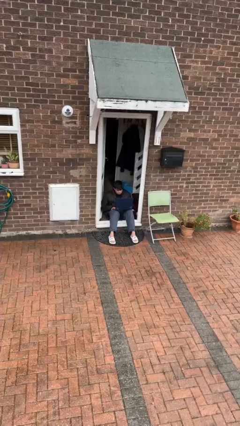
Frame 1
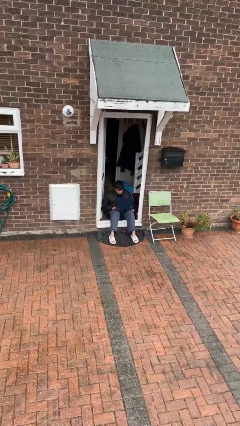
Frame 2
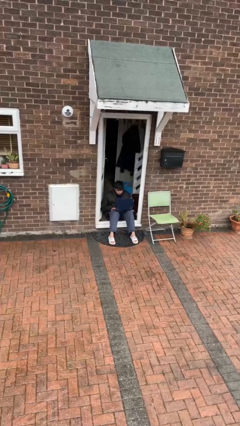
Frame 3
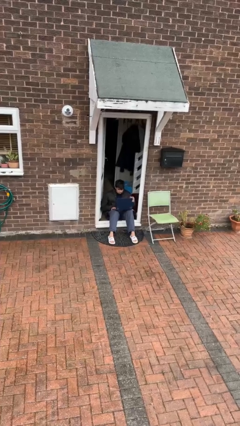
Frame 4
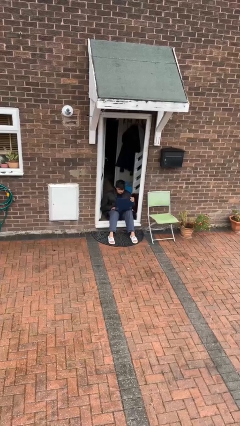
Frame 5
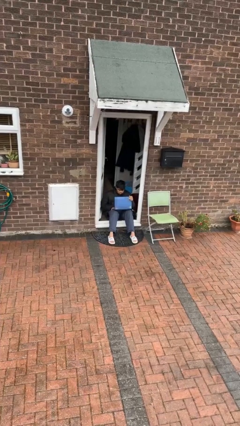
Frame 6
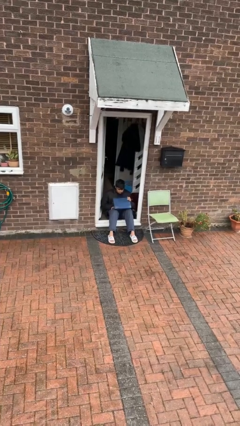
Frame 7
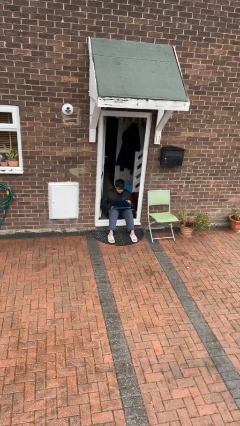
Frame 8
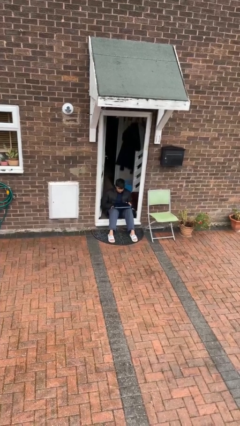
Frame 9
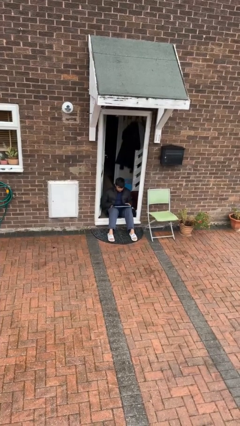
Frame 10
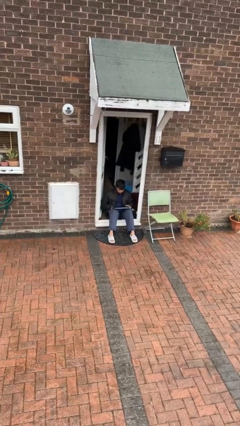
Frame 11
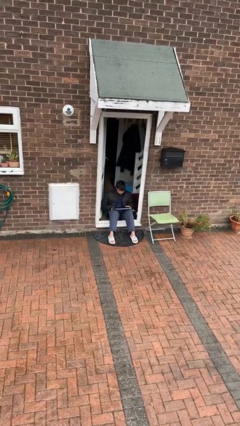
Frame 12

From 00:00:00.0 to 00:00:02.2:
person closes laptop

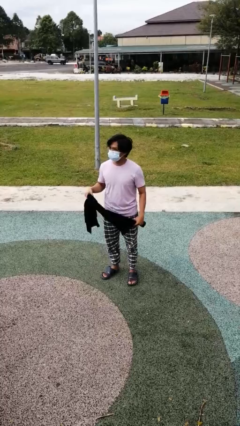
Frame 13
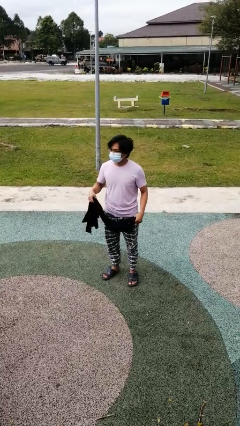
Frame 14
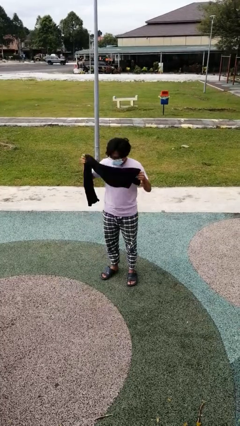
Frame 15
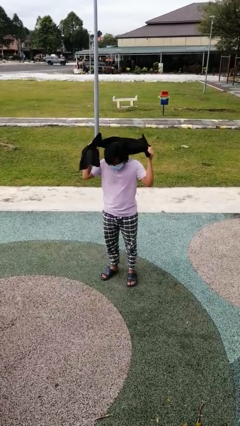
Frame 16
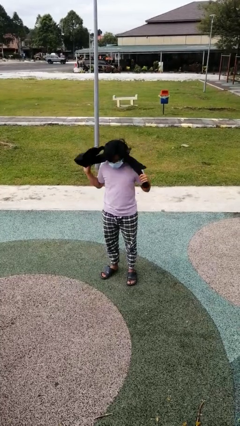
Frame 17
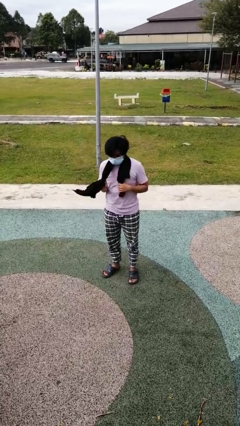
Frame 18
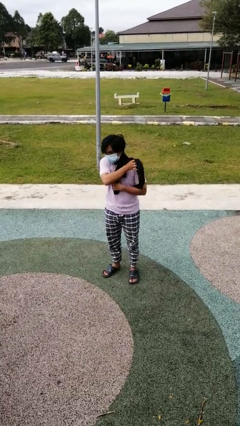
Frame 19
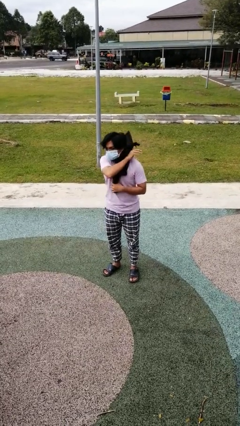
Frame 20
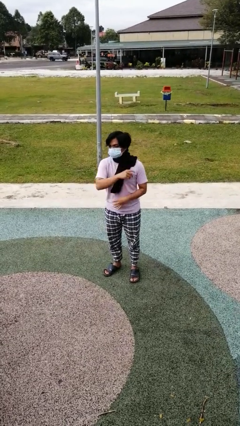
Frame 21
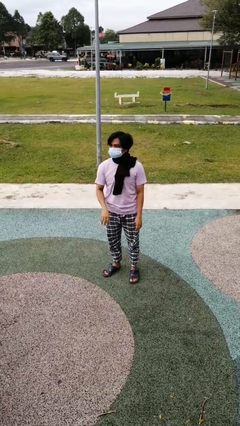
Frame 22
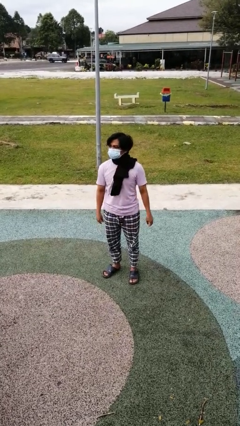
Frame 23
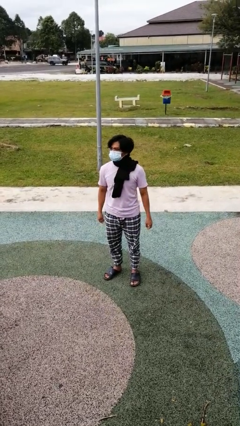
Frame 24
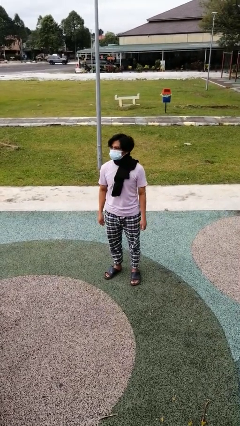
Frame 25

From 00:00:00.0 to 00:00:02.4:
person puts on scarf

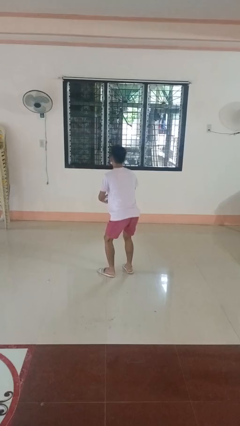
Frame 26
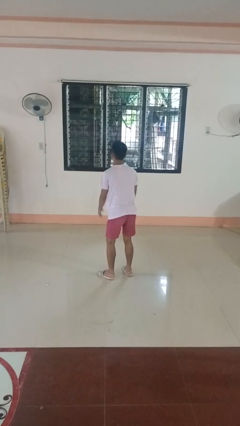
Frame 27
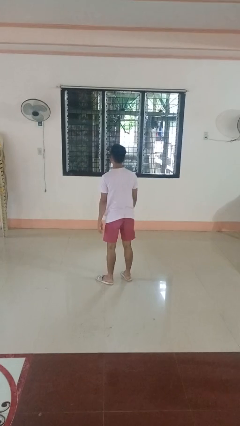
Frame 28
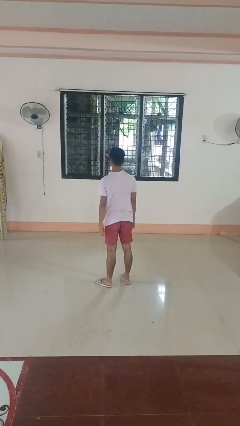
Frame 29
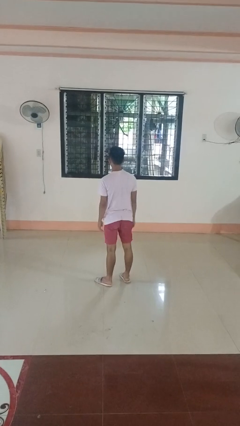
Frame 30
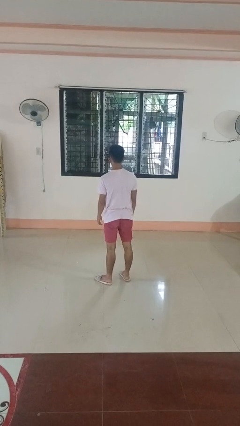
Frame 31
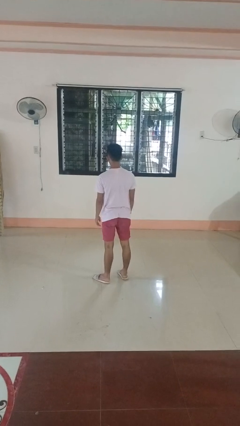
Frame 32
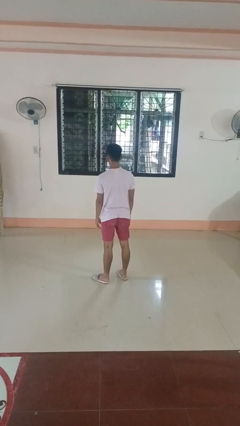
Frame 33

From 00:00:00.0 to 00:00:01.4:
person stands up

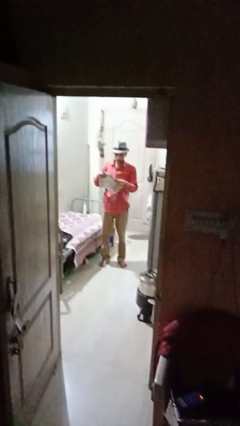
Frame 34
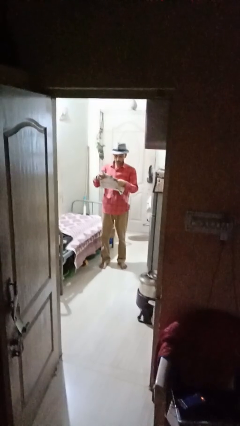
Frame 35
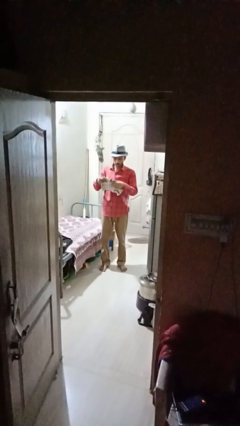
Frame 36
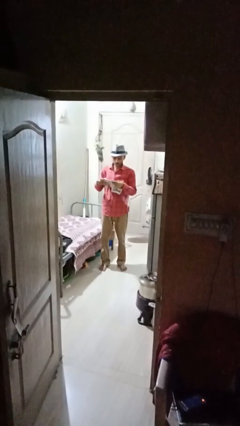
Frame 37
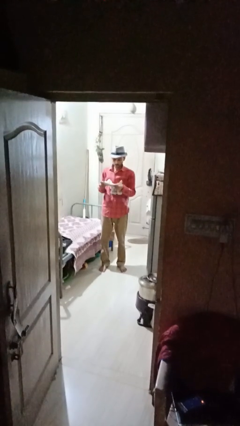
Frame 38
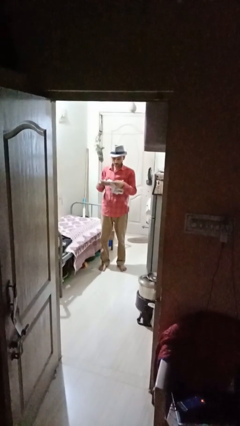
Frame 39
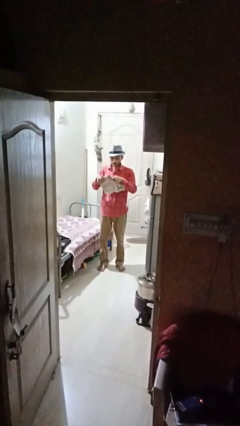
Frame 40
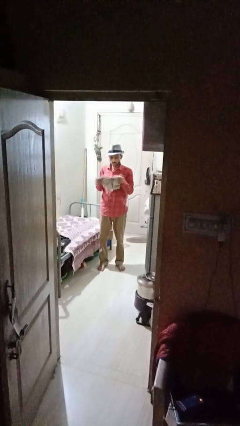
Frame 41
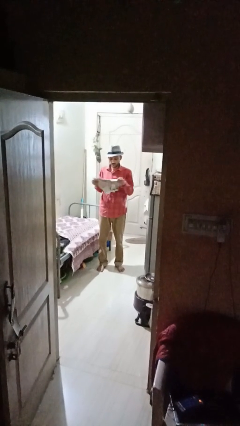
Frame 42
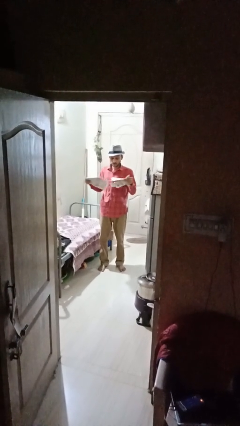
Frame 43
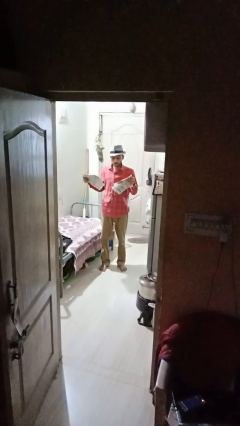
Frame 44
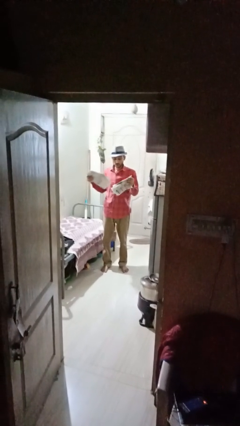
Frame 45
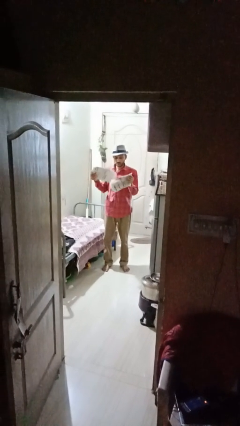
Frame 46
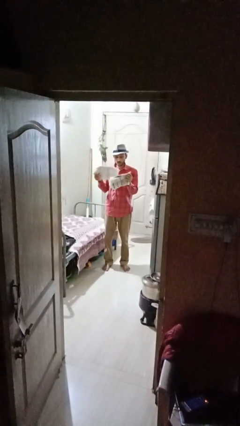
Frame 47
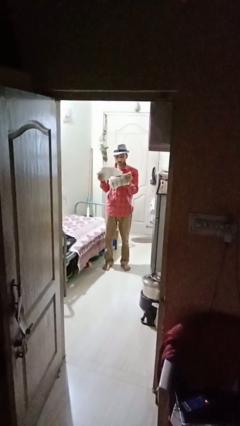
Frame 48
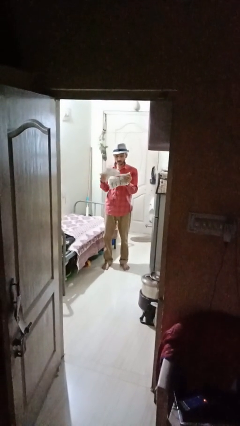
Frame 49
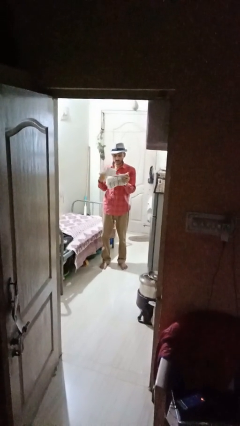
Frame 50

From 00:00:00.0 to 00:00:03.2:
person tears paper

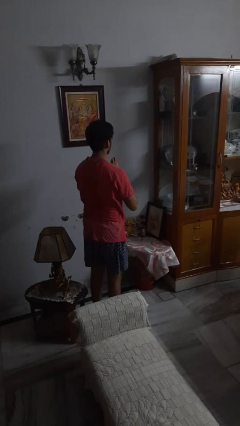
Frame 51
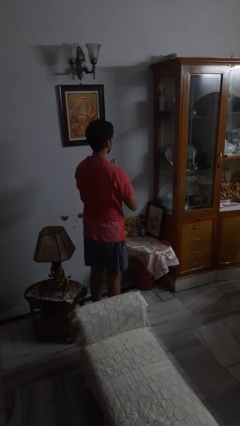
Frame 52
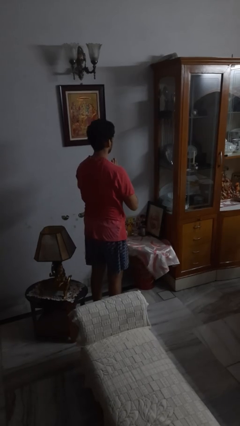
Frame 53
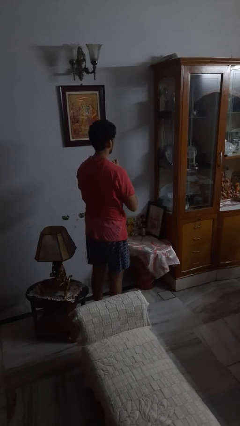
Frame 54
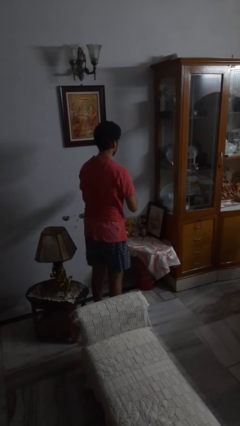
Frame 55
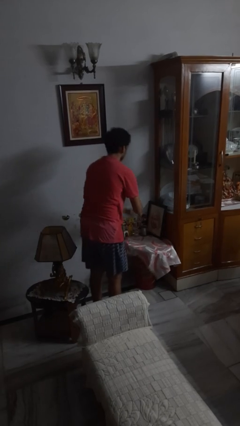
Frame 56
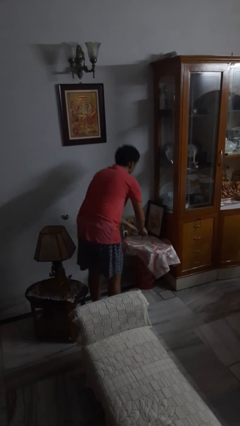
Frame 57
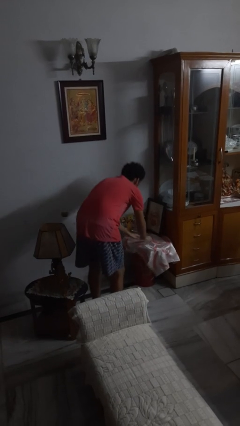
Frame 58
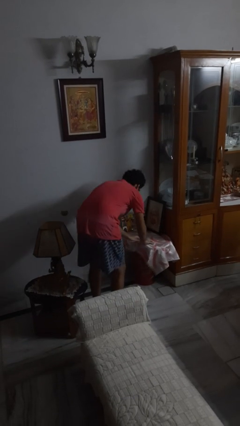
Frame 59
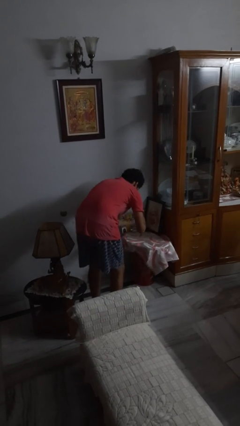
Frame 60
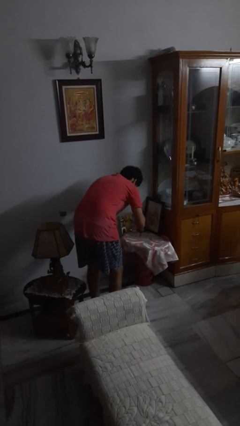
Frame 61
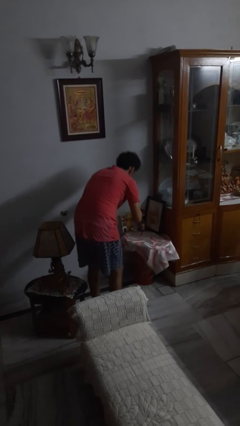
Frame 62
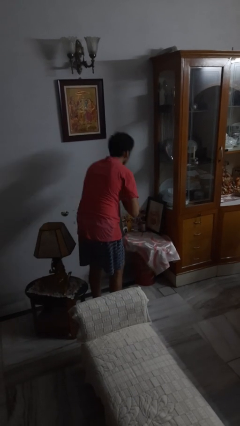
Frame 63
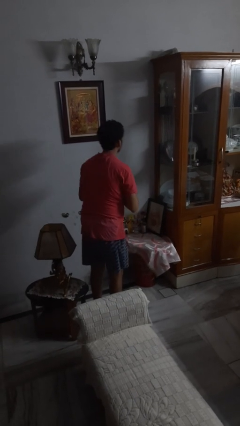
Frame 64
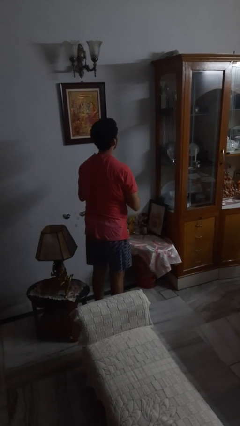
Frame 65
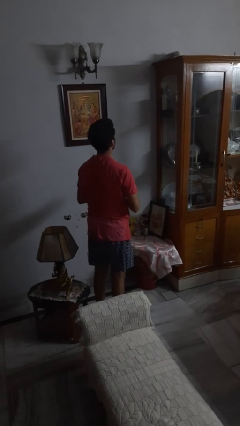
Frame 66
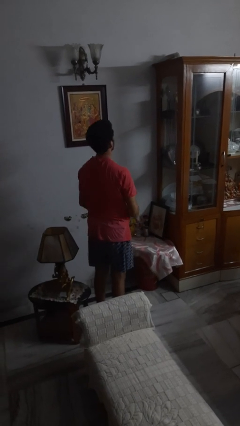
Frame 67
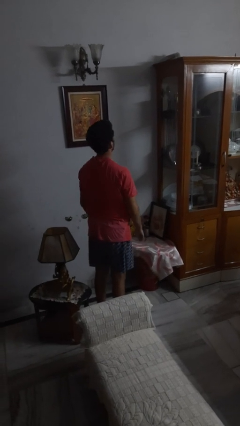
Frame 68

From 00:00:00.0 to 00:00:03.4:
person prays

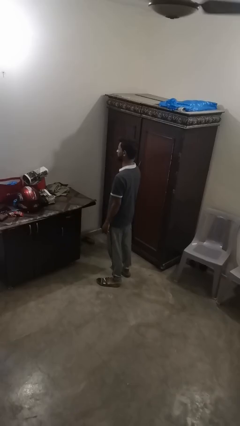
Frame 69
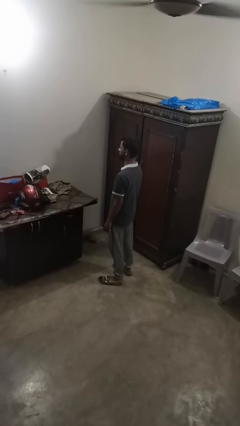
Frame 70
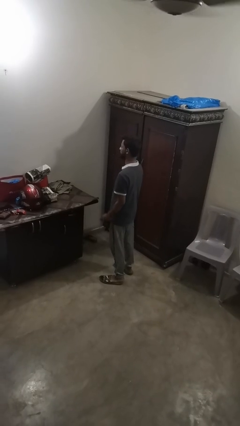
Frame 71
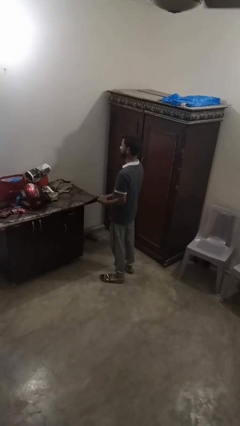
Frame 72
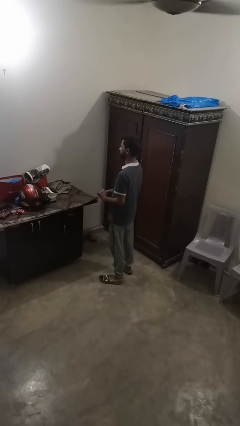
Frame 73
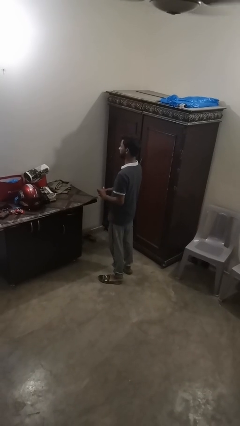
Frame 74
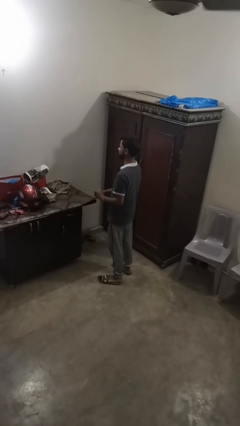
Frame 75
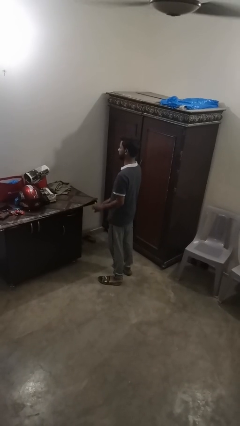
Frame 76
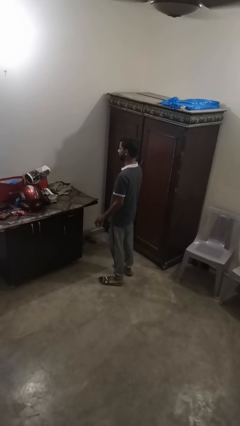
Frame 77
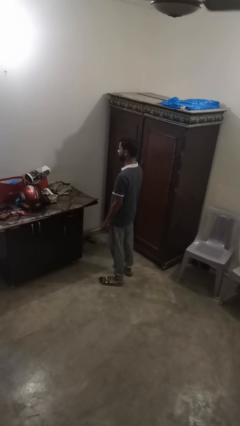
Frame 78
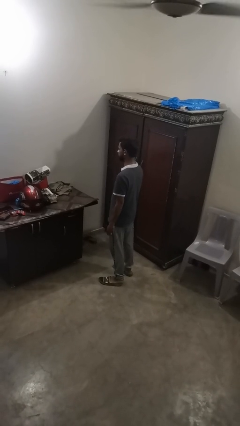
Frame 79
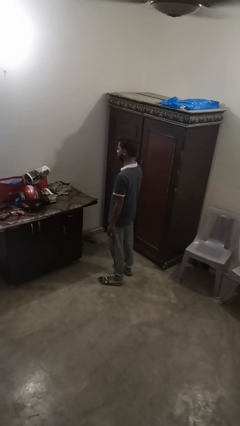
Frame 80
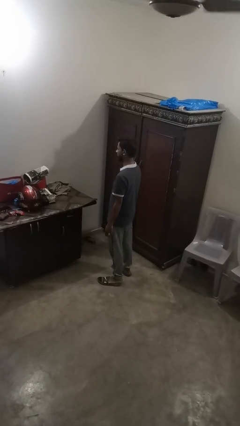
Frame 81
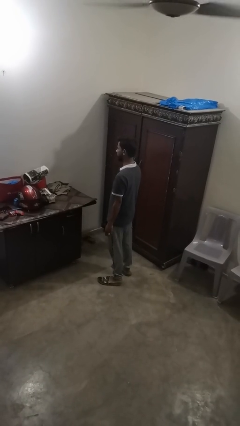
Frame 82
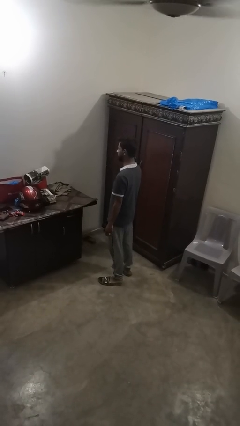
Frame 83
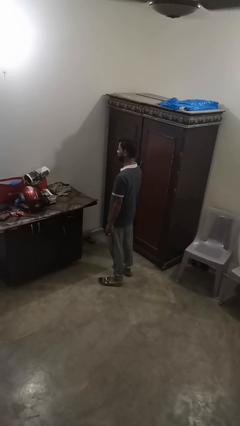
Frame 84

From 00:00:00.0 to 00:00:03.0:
person puts on ring

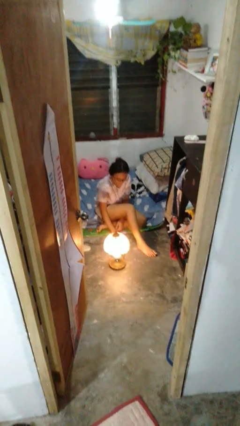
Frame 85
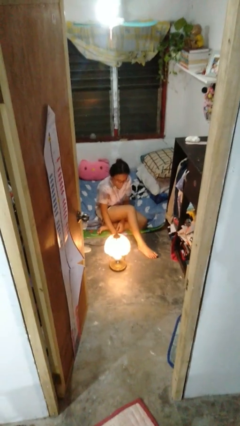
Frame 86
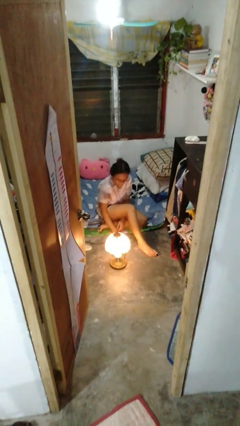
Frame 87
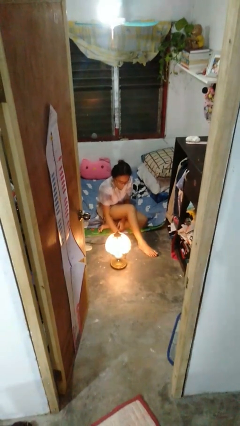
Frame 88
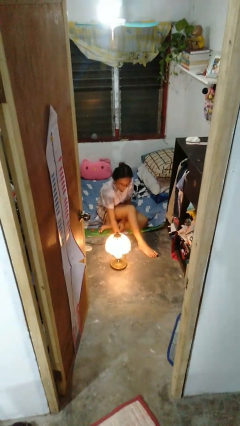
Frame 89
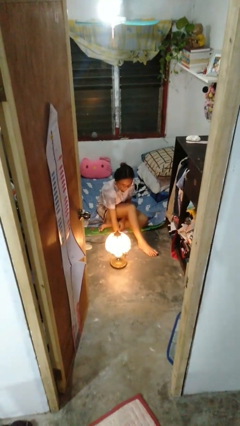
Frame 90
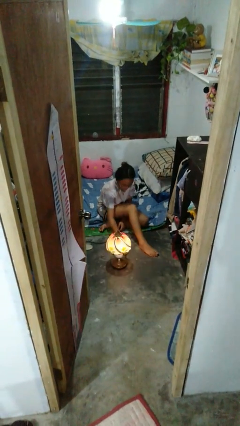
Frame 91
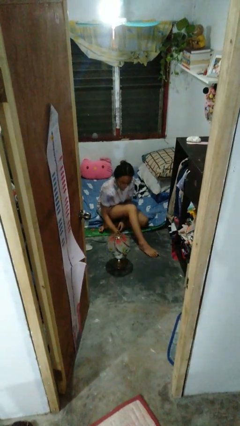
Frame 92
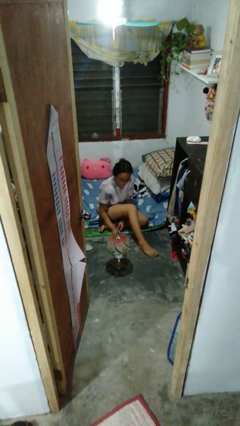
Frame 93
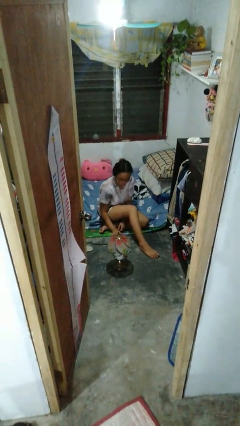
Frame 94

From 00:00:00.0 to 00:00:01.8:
person turns off lamp

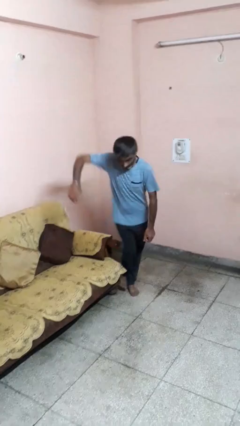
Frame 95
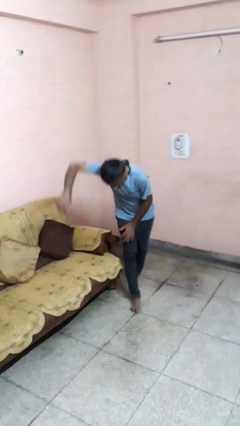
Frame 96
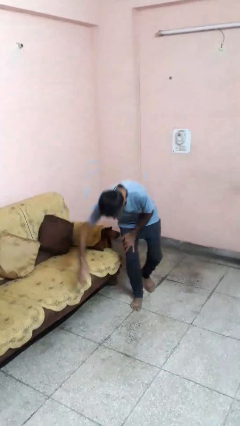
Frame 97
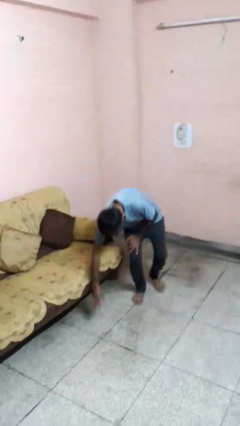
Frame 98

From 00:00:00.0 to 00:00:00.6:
person trips on object on floor
